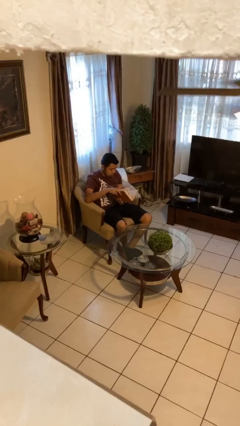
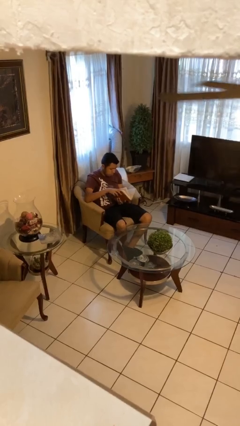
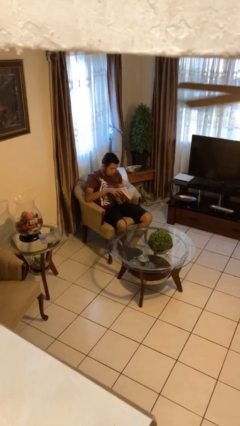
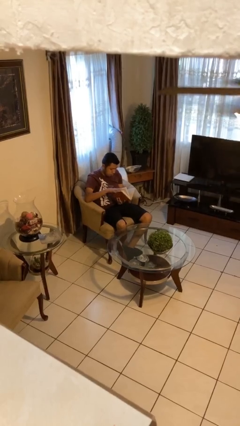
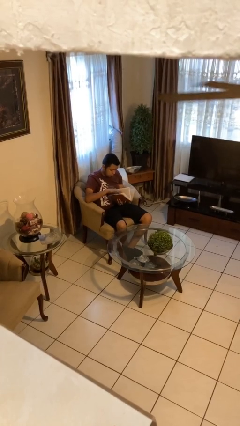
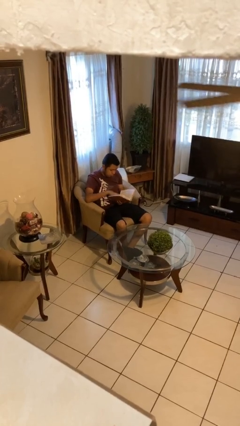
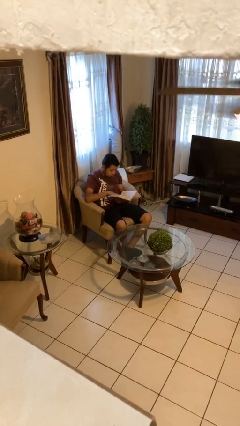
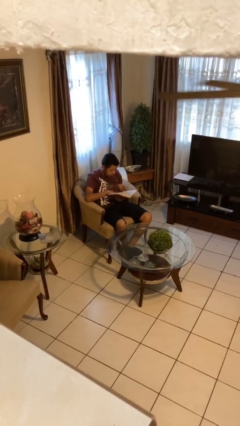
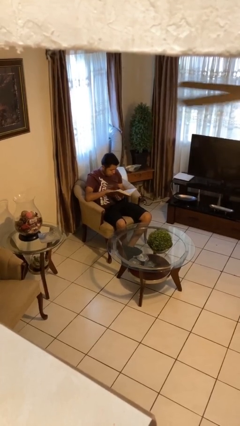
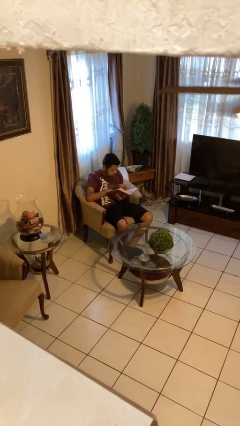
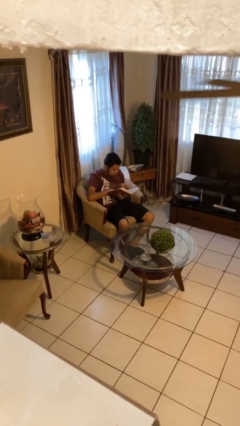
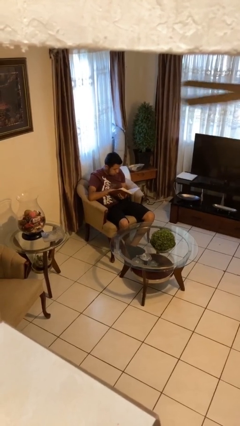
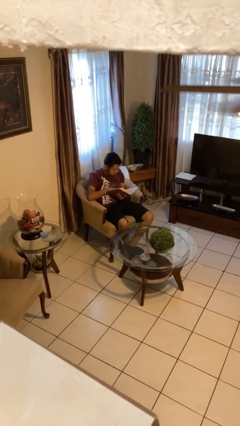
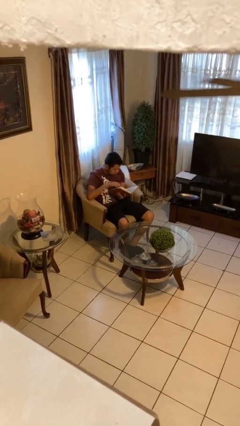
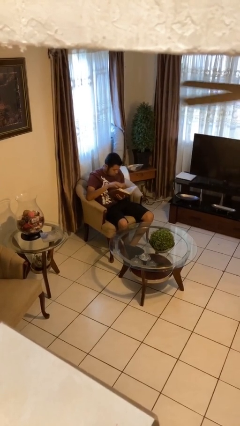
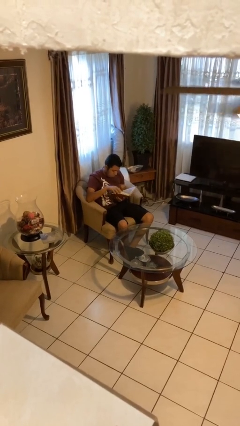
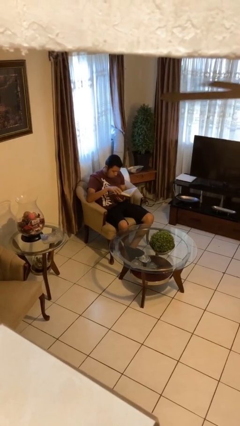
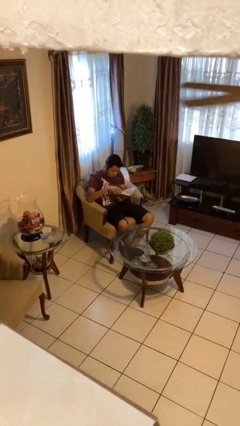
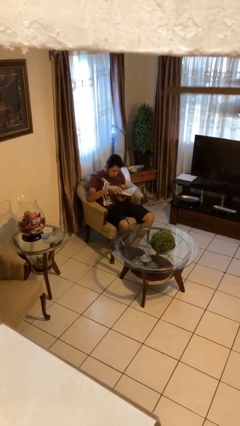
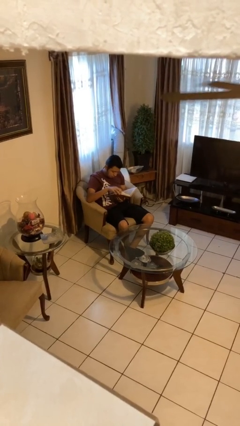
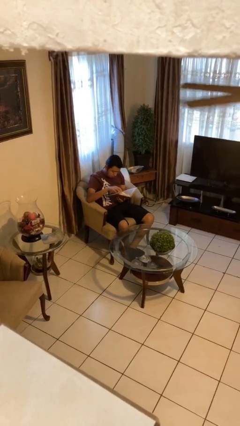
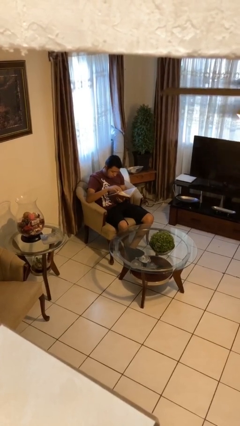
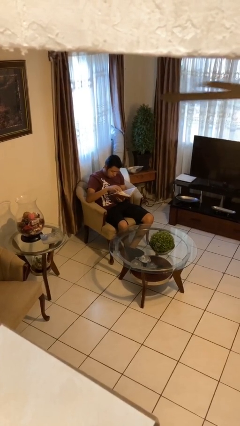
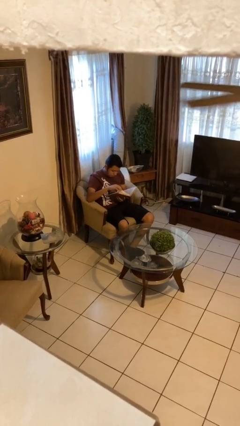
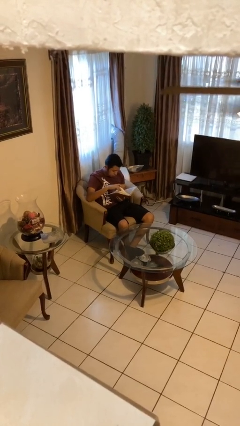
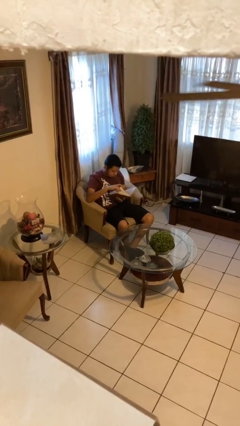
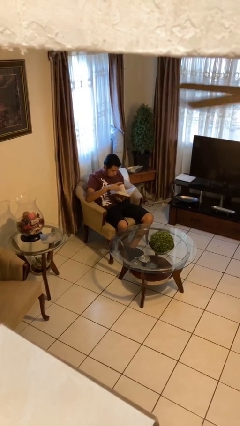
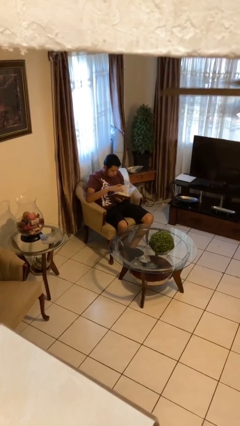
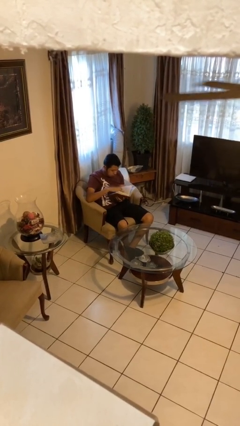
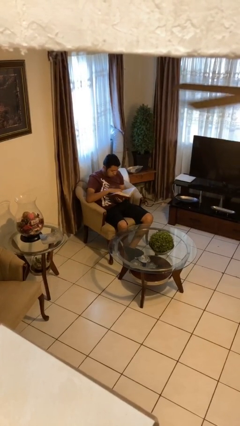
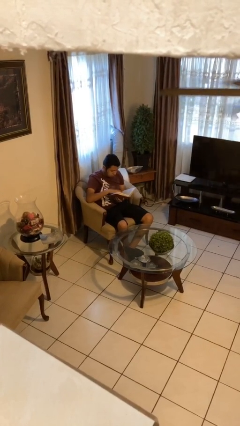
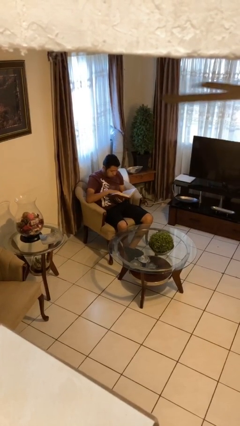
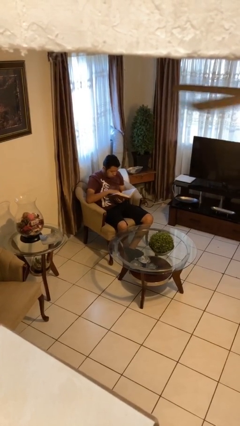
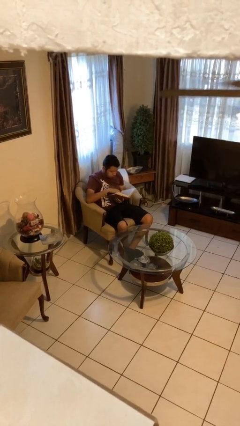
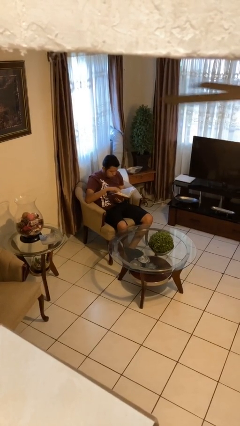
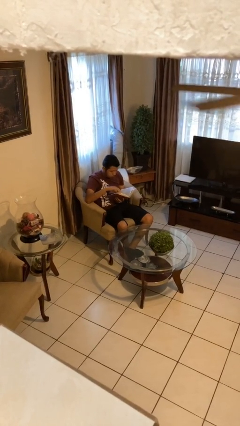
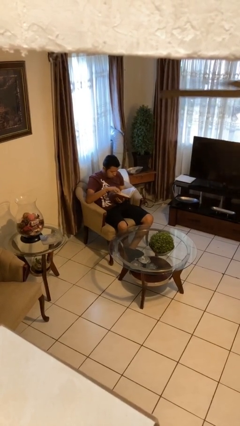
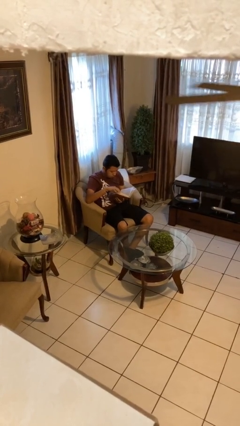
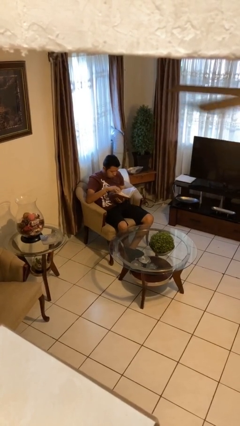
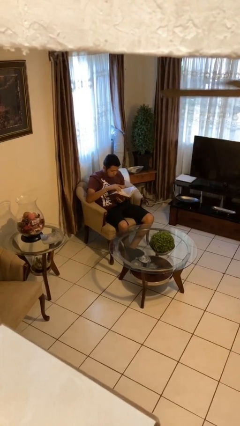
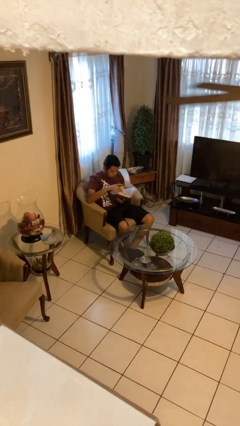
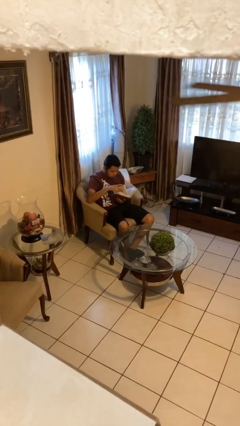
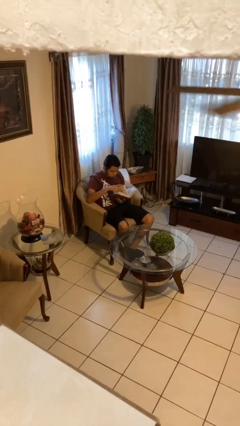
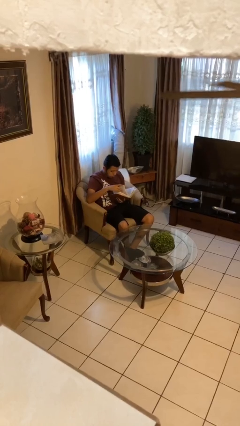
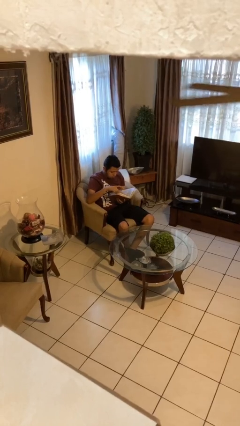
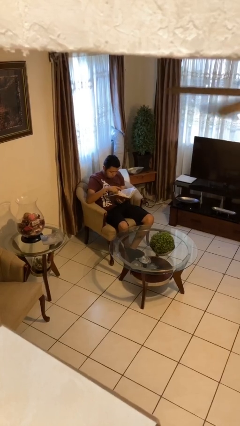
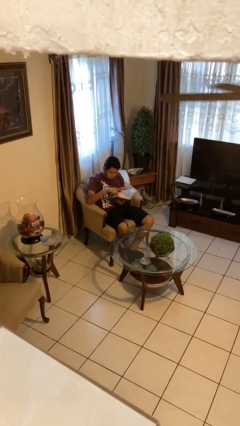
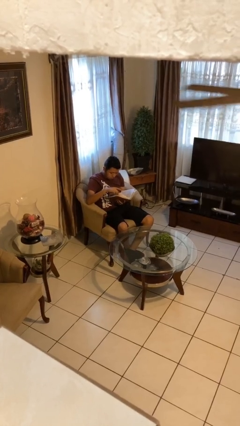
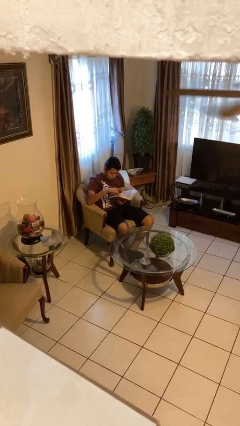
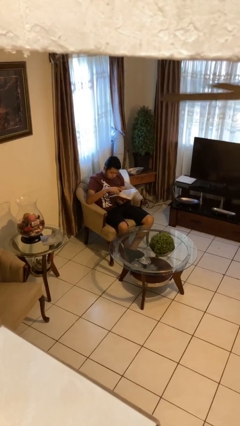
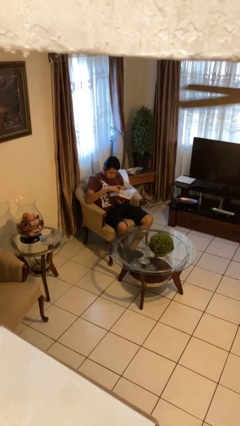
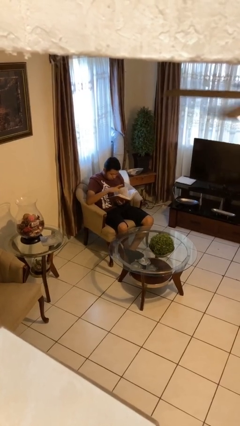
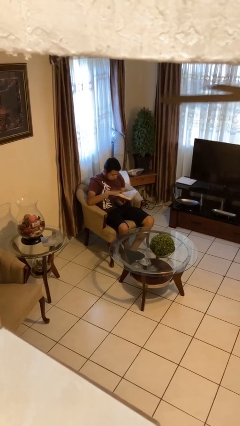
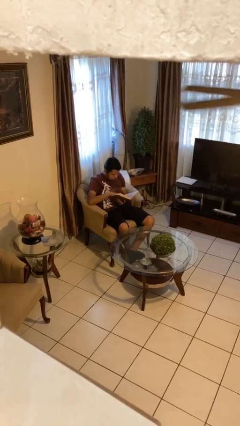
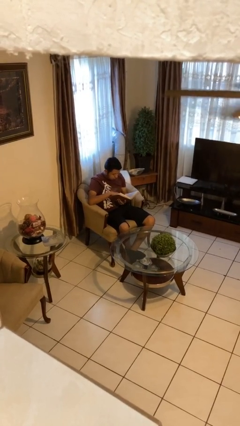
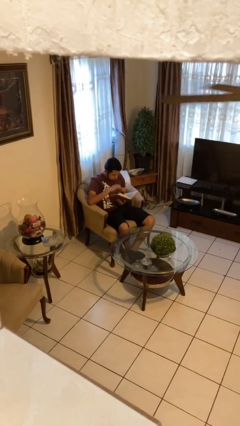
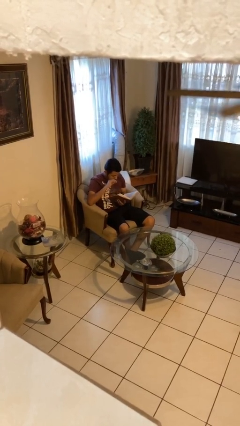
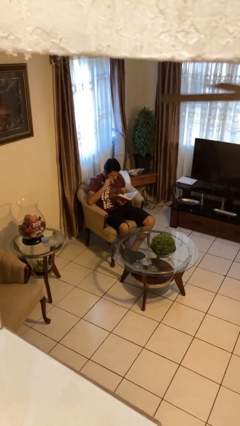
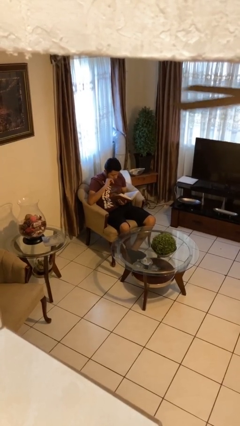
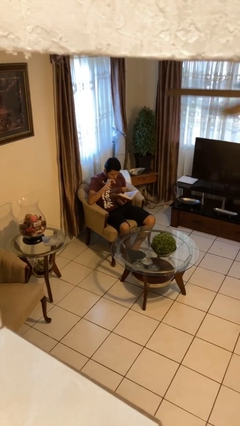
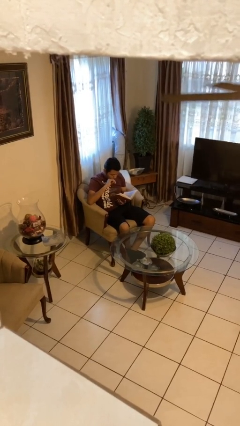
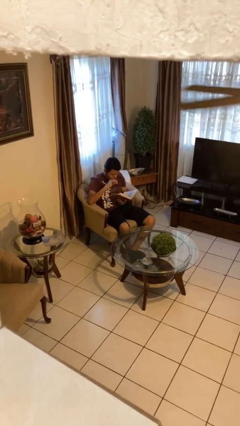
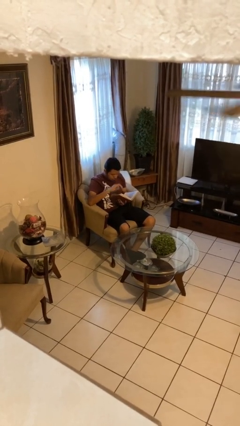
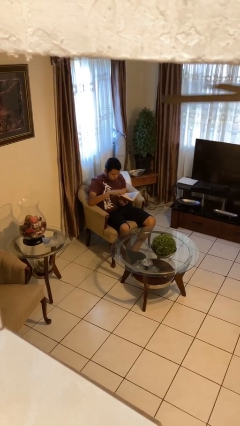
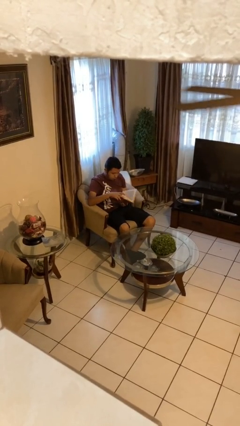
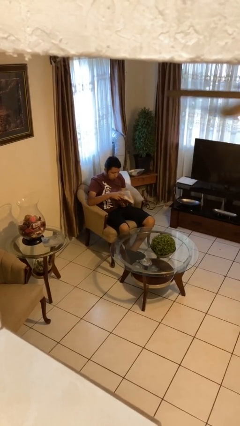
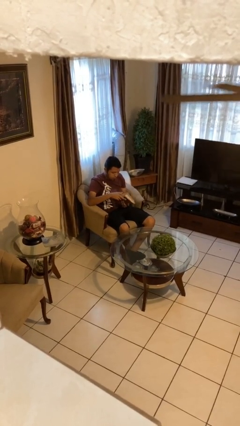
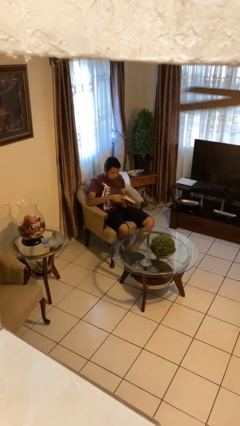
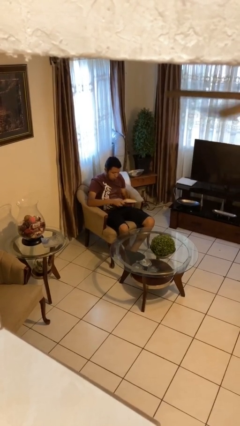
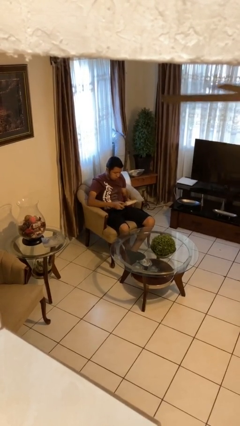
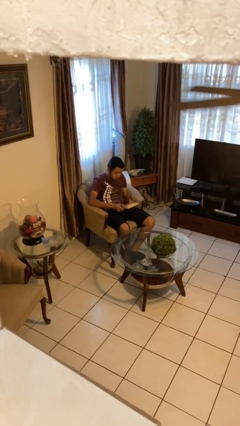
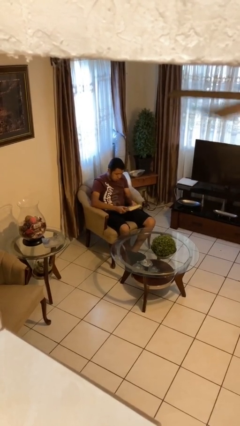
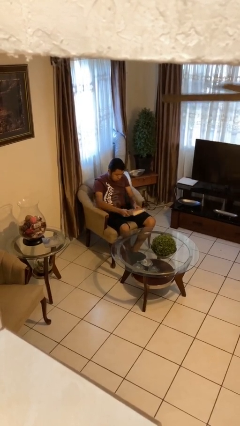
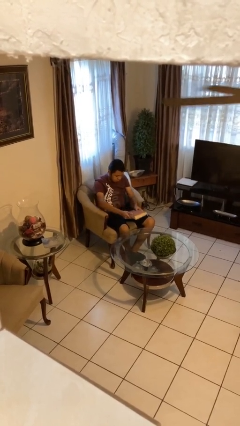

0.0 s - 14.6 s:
person reads document

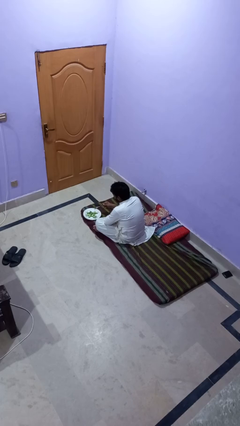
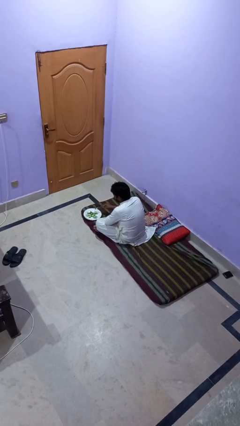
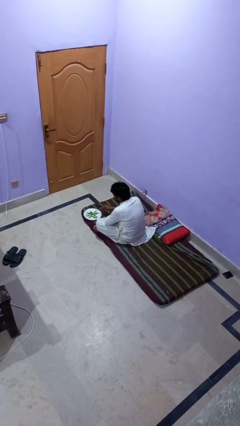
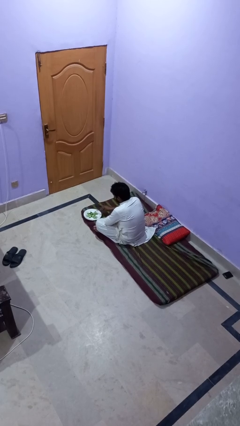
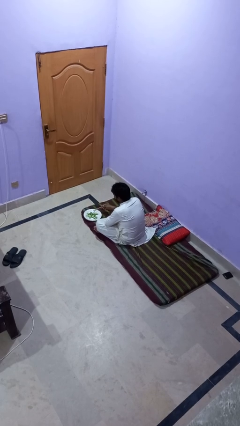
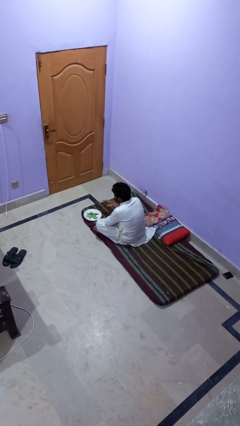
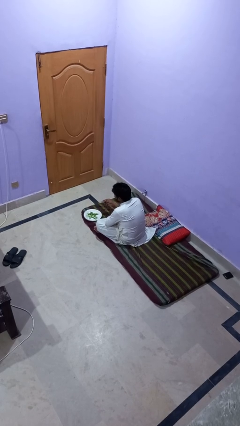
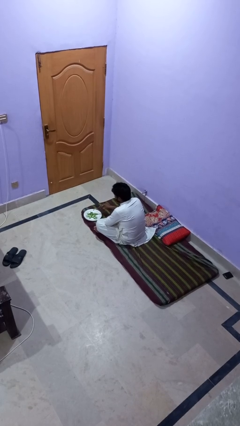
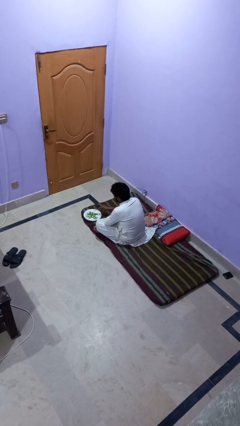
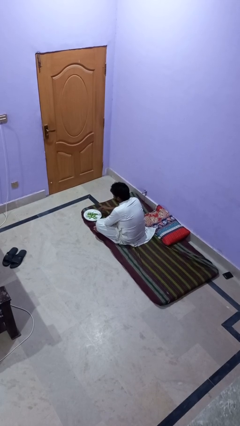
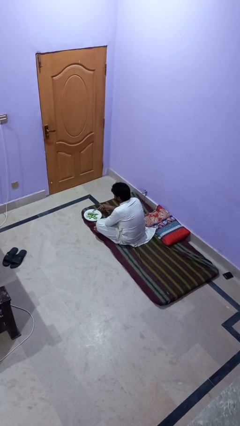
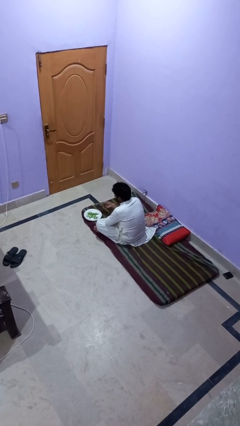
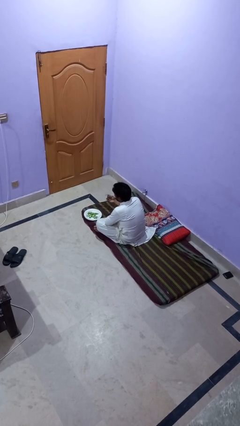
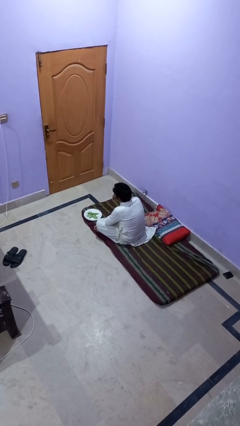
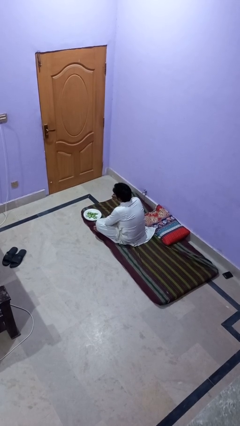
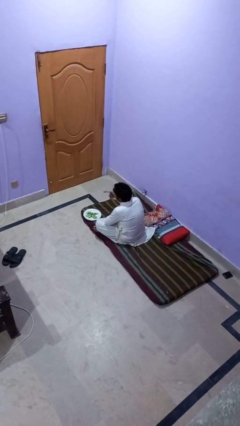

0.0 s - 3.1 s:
person eats with utensil

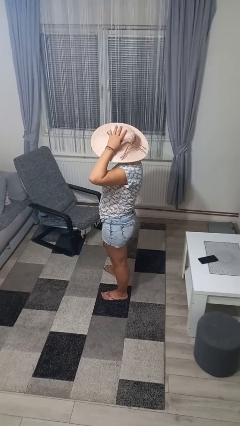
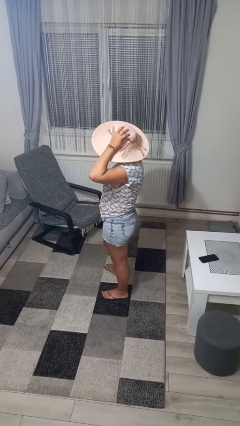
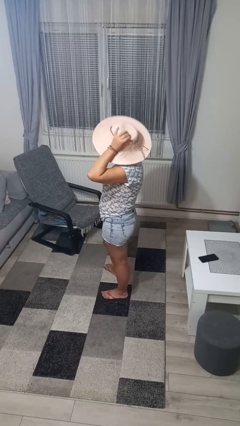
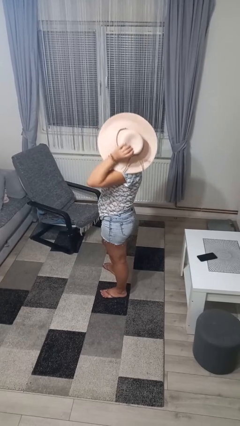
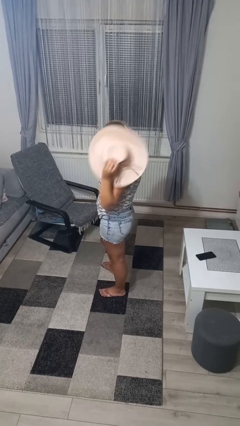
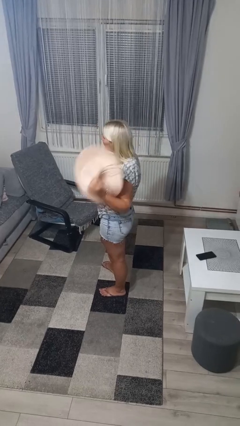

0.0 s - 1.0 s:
person takes off hat
